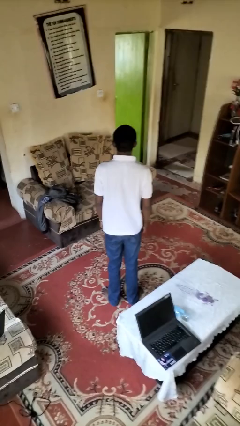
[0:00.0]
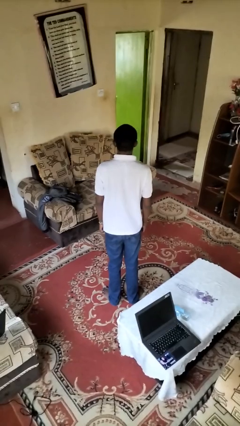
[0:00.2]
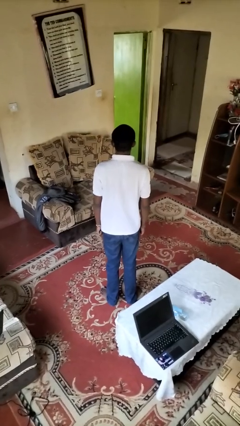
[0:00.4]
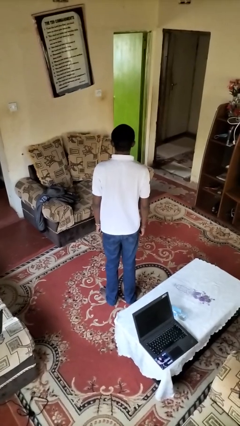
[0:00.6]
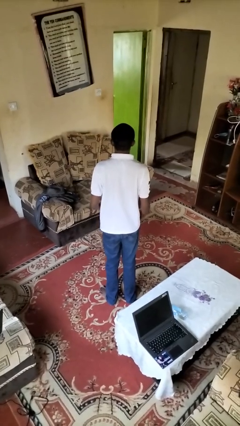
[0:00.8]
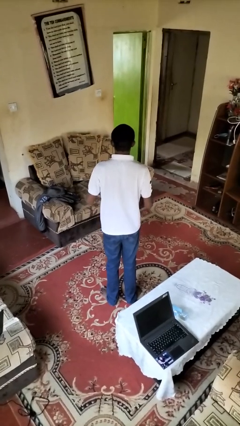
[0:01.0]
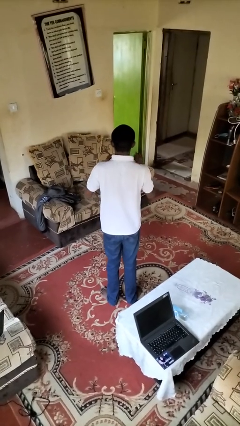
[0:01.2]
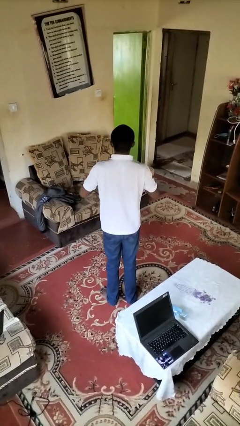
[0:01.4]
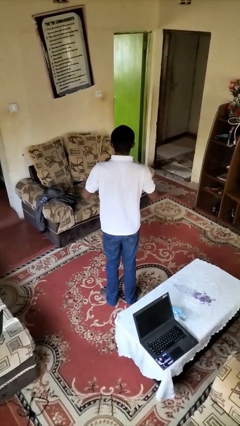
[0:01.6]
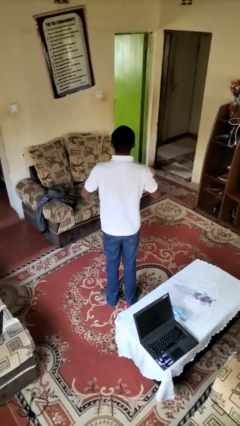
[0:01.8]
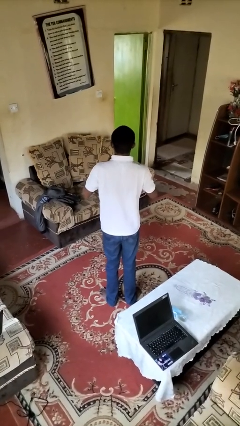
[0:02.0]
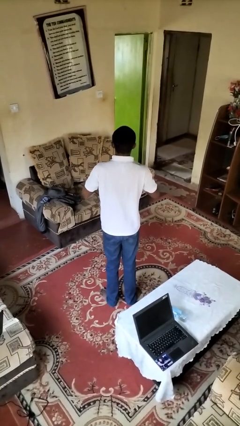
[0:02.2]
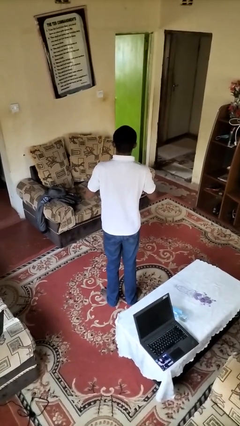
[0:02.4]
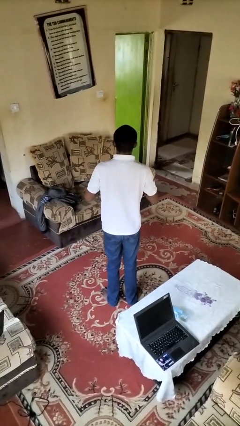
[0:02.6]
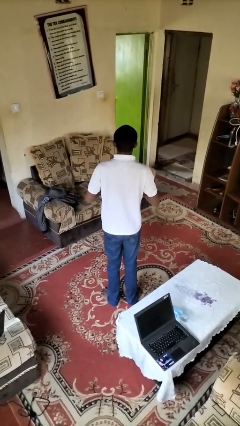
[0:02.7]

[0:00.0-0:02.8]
person drums on chest

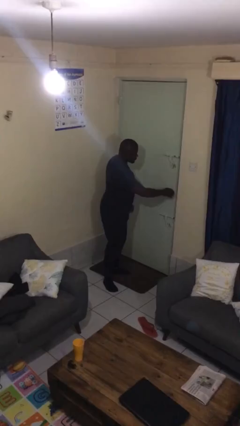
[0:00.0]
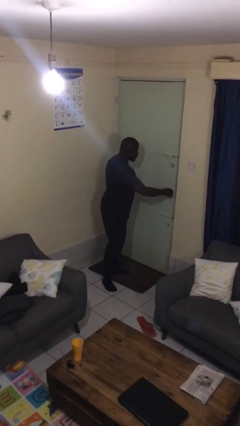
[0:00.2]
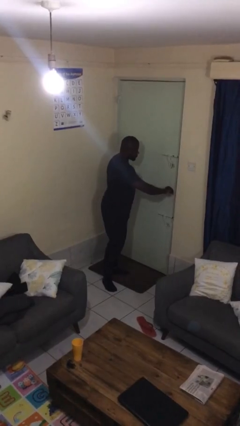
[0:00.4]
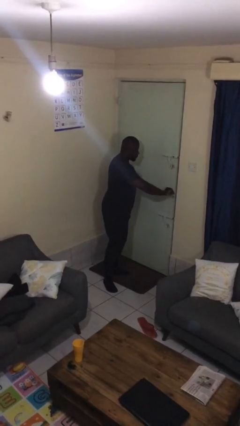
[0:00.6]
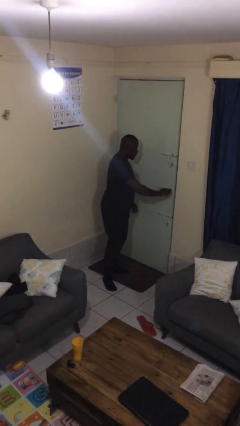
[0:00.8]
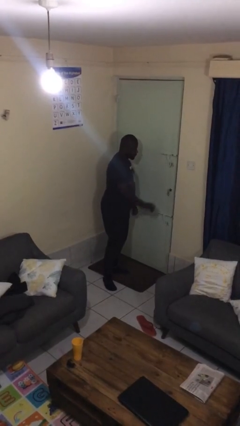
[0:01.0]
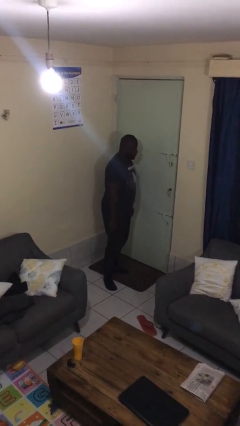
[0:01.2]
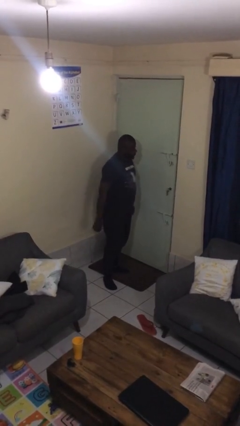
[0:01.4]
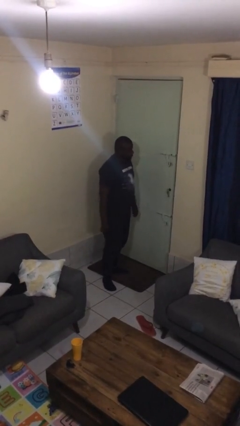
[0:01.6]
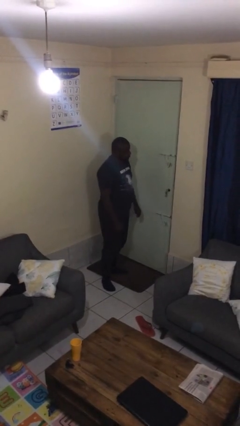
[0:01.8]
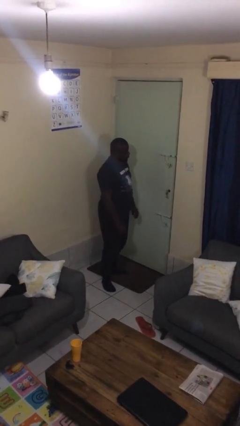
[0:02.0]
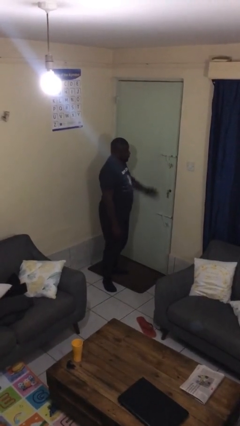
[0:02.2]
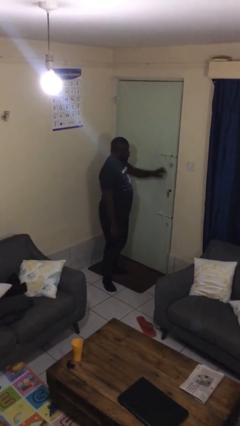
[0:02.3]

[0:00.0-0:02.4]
person unlocks door with keys

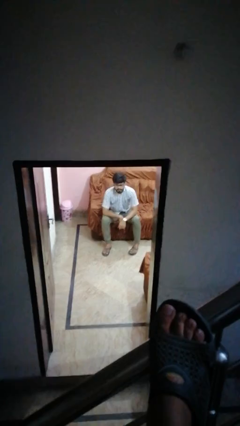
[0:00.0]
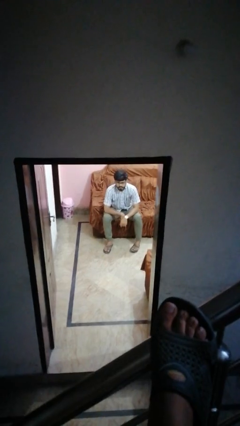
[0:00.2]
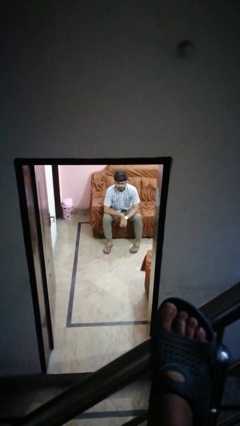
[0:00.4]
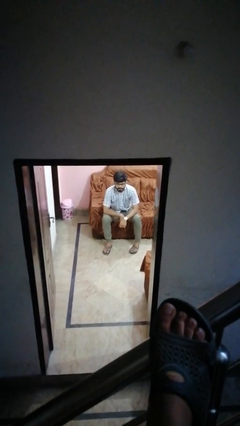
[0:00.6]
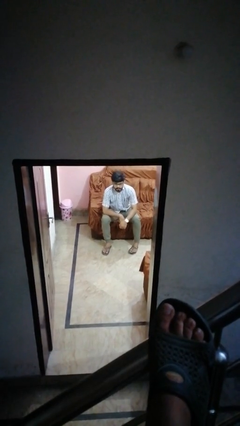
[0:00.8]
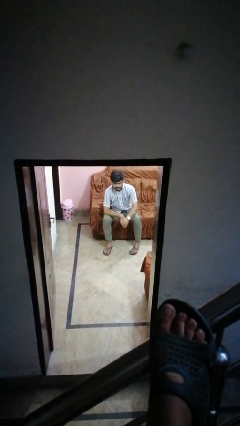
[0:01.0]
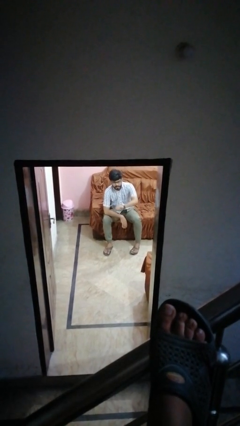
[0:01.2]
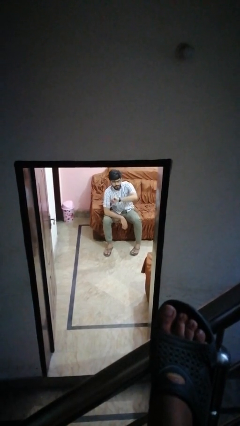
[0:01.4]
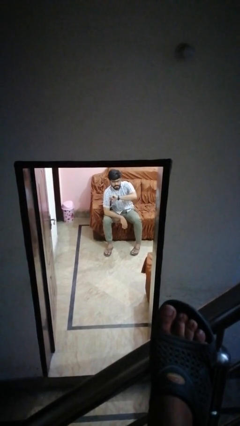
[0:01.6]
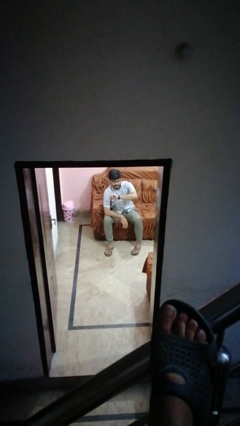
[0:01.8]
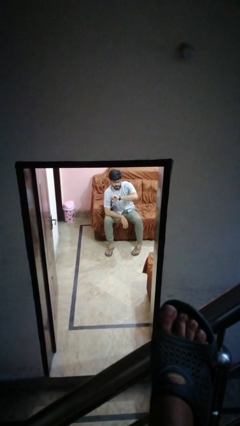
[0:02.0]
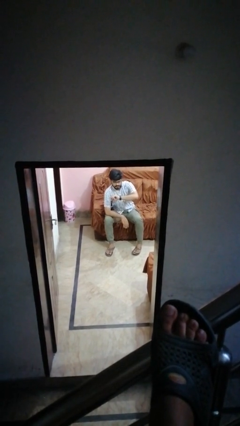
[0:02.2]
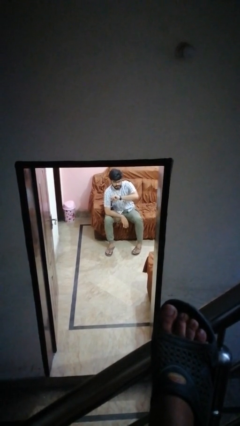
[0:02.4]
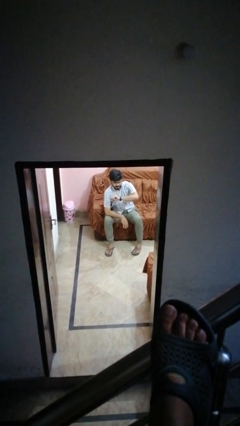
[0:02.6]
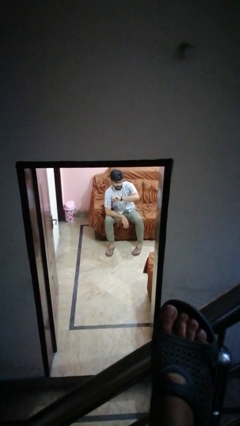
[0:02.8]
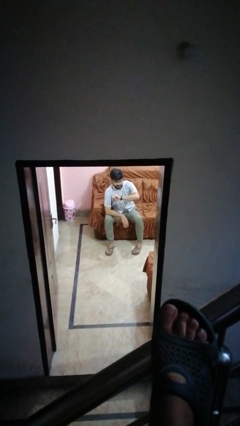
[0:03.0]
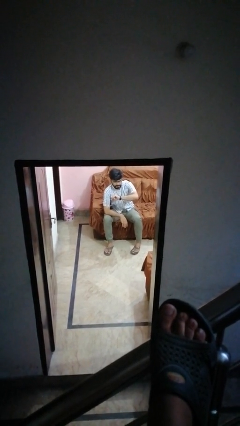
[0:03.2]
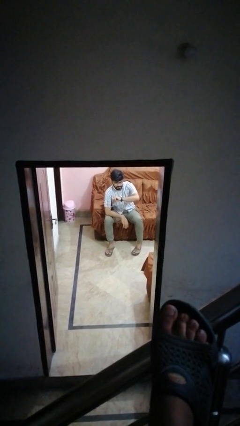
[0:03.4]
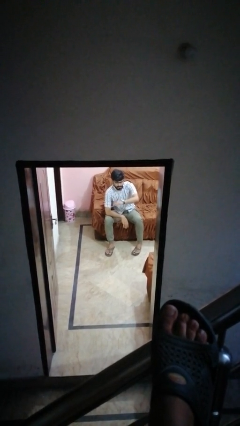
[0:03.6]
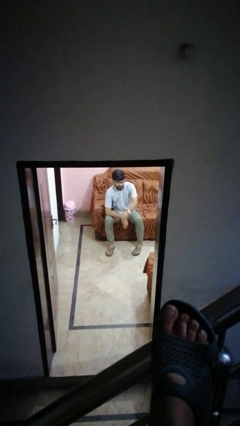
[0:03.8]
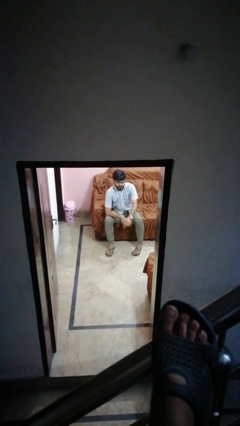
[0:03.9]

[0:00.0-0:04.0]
person looks at wristwatch

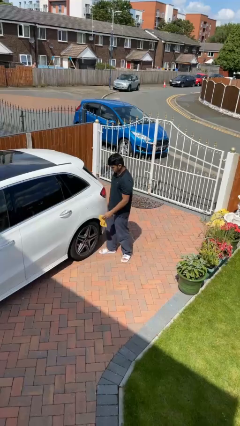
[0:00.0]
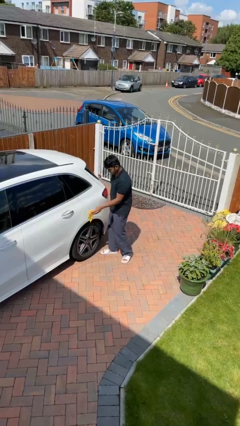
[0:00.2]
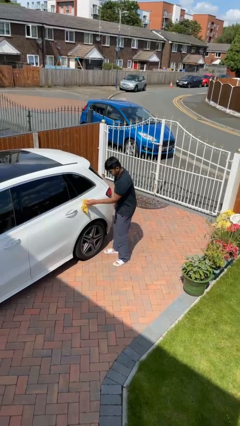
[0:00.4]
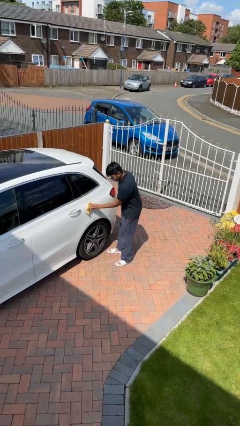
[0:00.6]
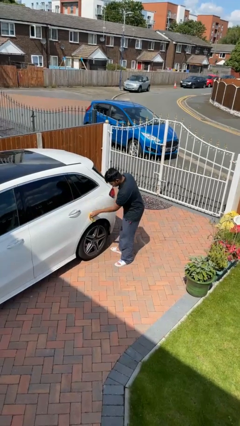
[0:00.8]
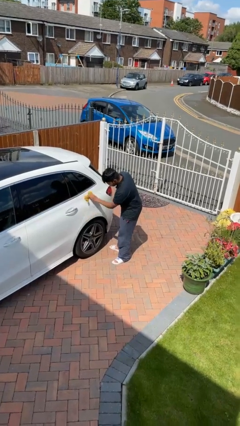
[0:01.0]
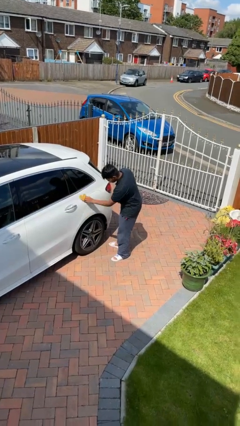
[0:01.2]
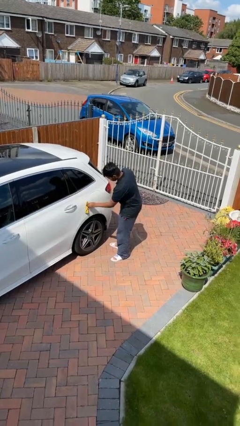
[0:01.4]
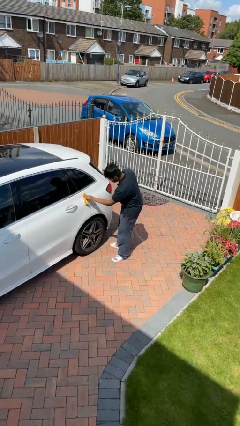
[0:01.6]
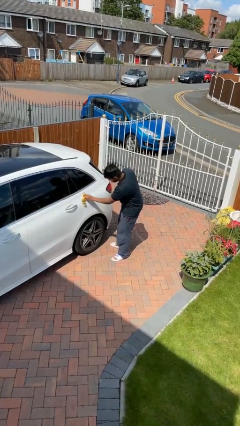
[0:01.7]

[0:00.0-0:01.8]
person polishes car with rag

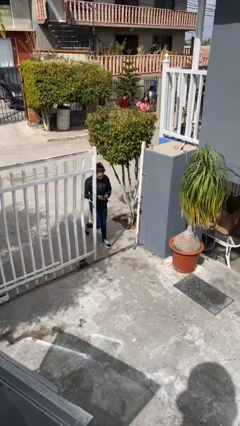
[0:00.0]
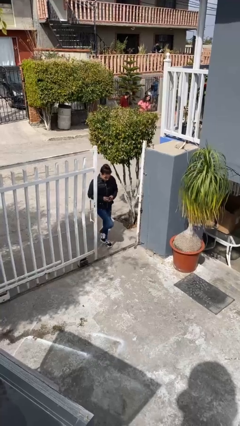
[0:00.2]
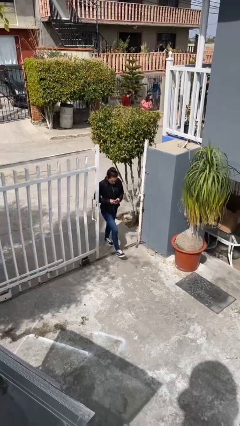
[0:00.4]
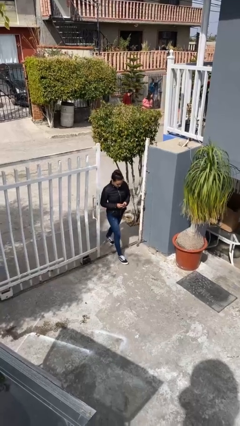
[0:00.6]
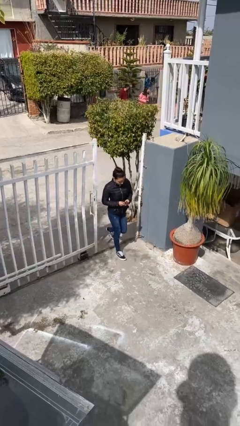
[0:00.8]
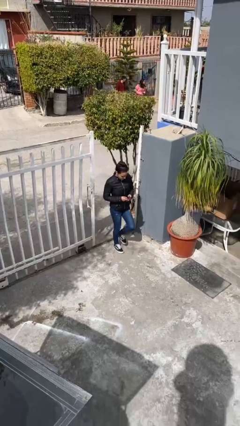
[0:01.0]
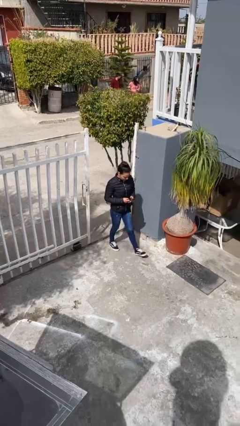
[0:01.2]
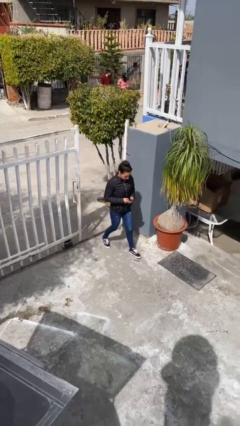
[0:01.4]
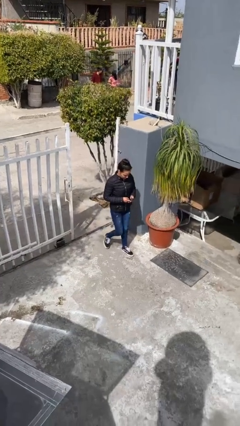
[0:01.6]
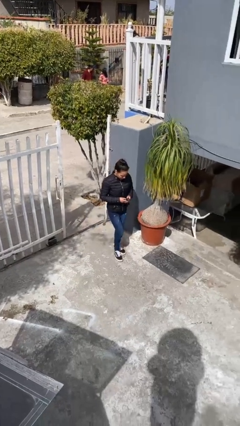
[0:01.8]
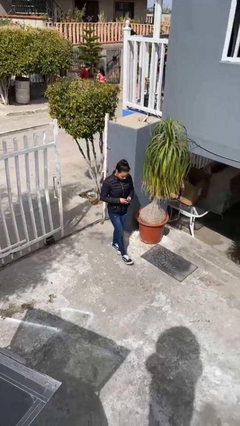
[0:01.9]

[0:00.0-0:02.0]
person enters scene through structure

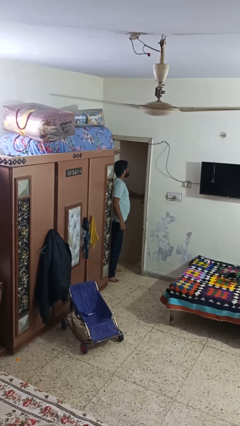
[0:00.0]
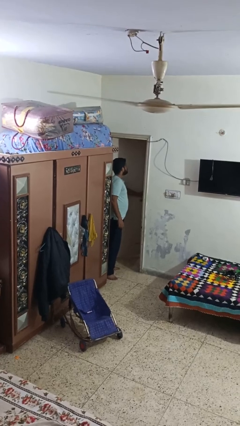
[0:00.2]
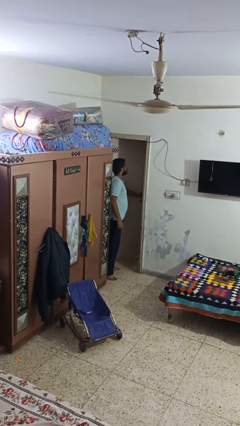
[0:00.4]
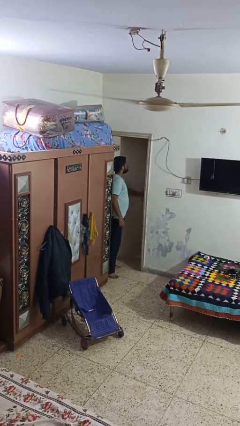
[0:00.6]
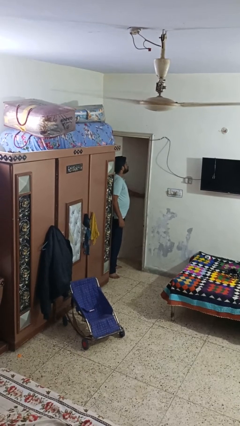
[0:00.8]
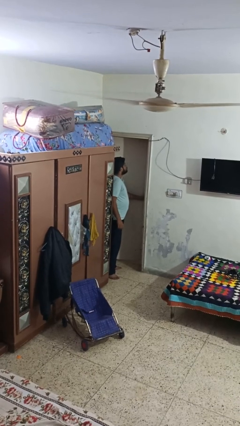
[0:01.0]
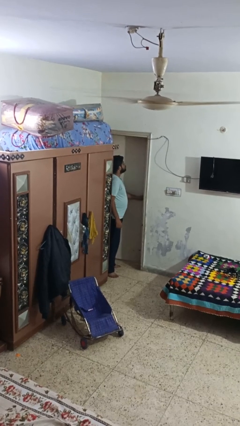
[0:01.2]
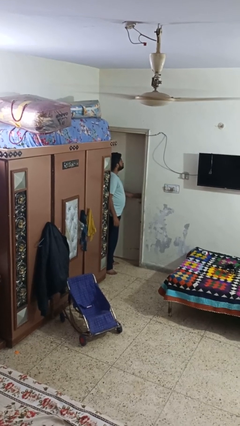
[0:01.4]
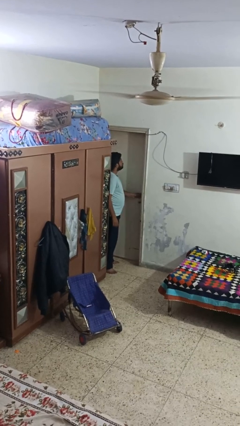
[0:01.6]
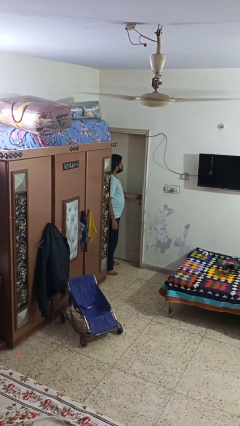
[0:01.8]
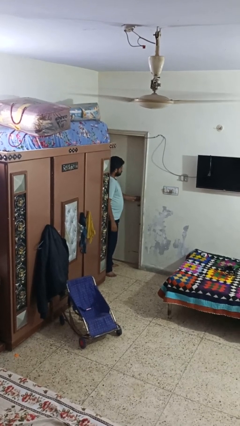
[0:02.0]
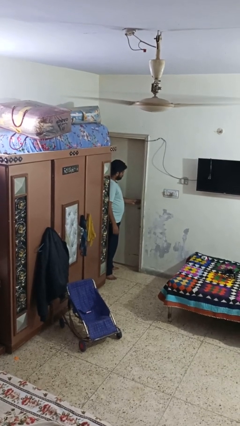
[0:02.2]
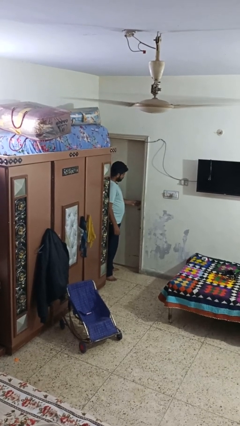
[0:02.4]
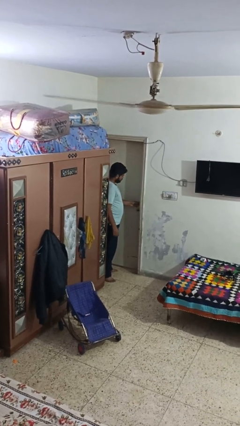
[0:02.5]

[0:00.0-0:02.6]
person closes facility door

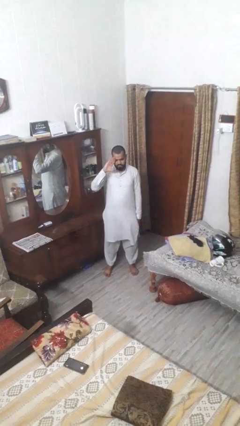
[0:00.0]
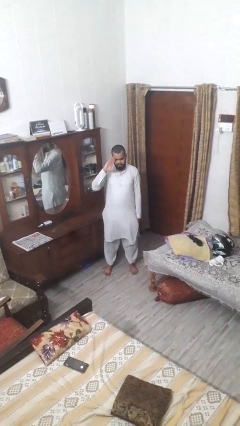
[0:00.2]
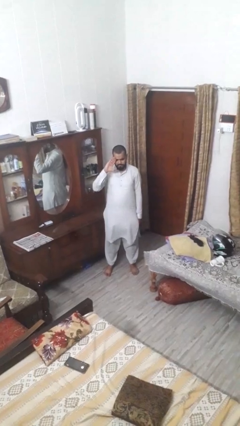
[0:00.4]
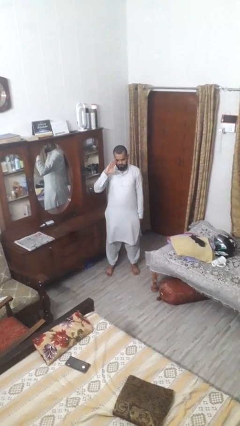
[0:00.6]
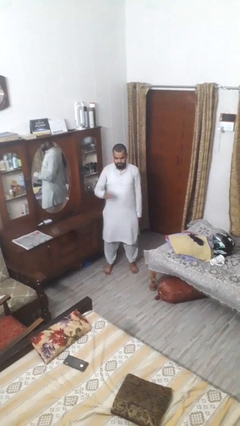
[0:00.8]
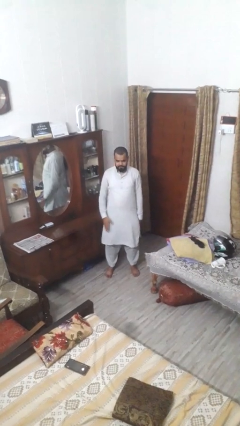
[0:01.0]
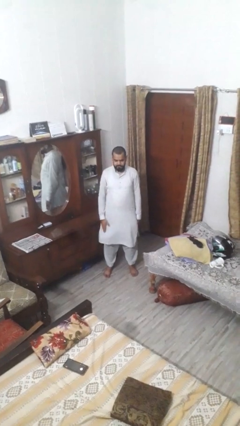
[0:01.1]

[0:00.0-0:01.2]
person salutes

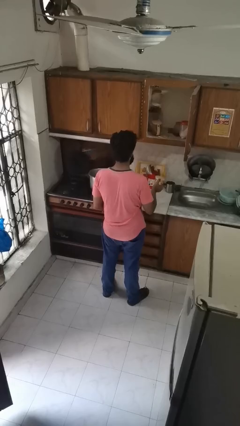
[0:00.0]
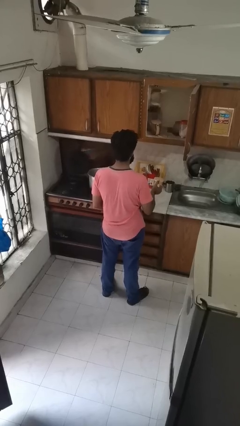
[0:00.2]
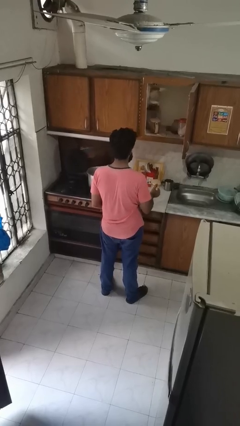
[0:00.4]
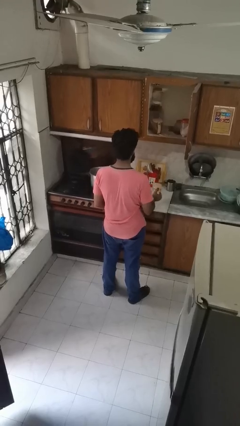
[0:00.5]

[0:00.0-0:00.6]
person puts down object into cabinet
